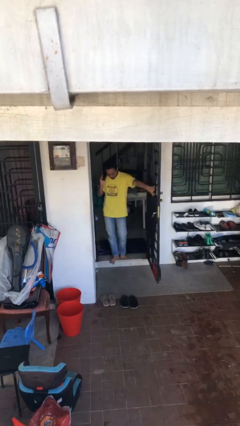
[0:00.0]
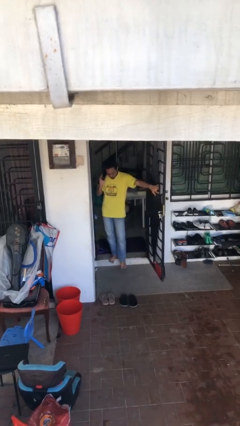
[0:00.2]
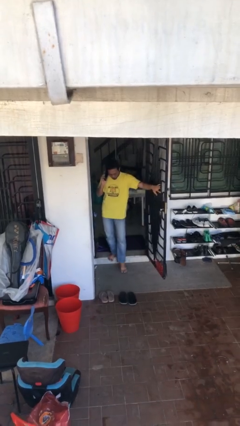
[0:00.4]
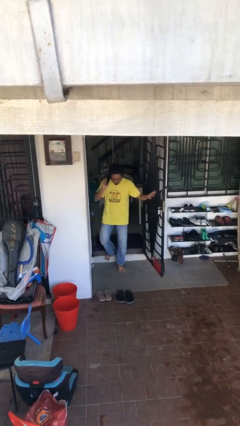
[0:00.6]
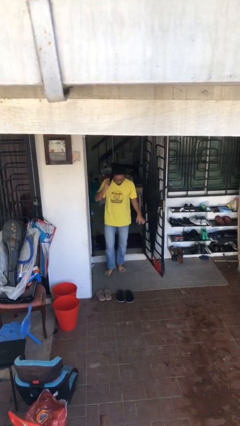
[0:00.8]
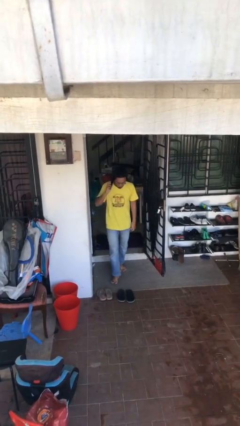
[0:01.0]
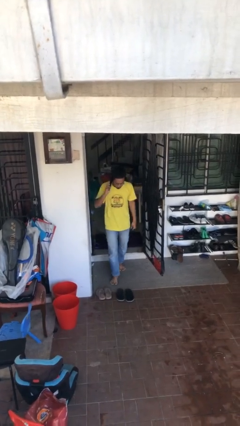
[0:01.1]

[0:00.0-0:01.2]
person enters scene through structure

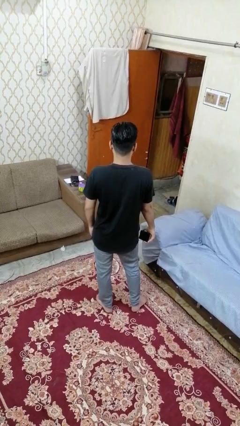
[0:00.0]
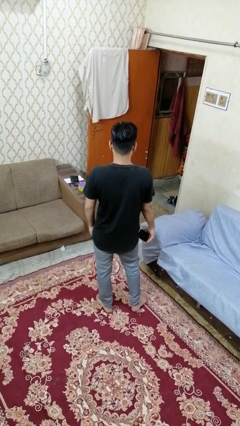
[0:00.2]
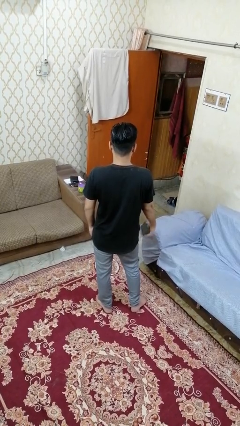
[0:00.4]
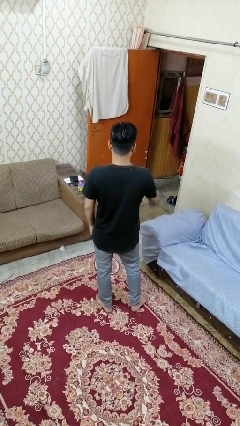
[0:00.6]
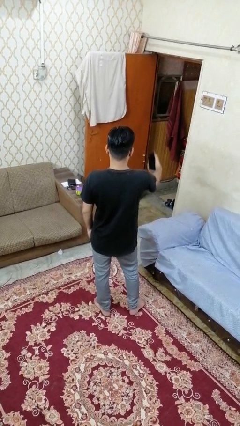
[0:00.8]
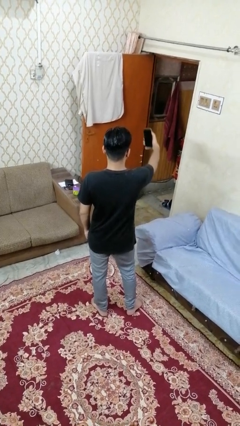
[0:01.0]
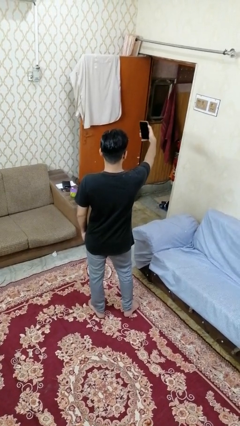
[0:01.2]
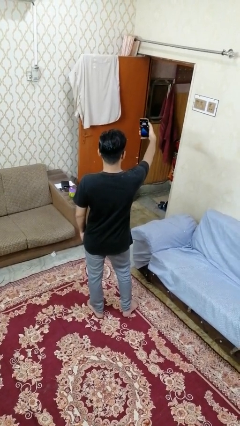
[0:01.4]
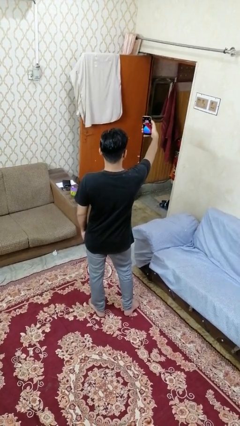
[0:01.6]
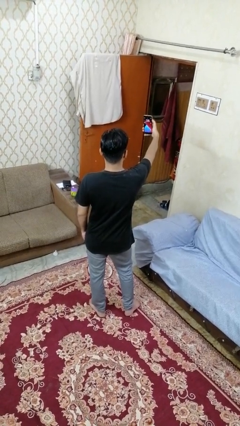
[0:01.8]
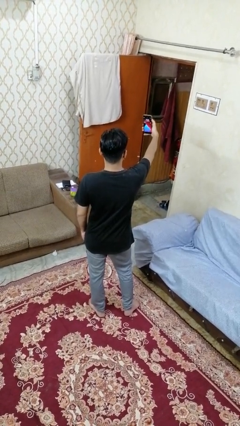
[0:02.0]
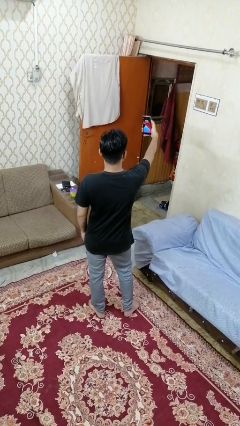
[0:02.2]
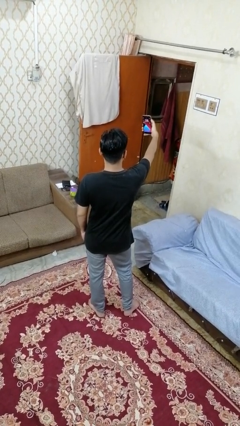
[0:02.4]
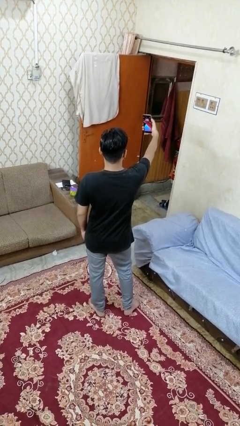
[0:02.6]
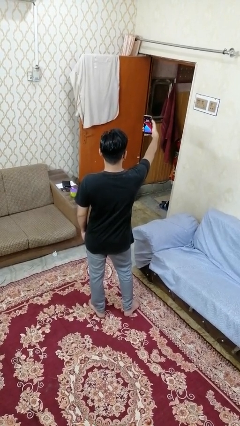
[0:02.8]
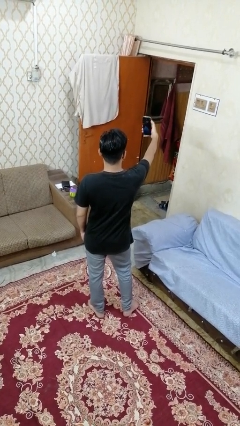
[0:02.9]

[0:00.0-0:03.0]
person takes selfie

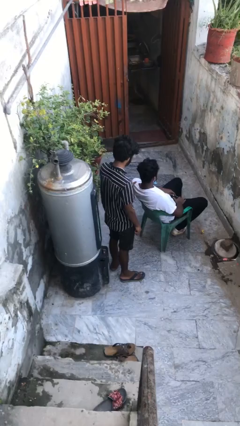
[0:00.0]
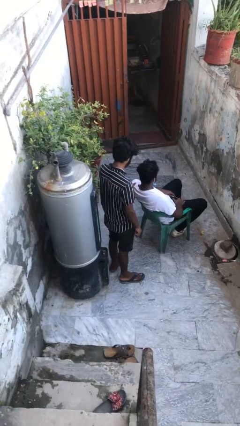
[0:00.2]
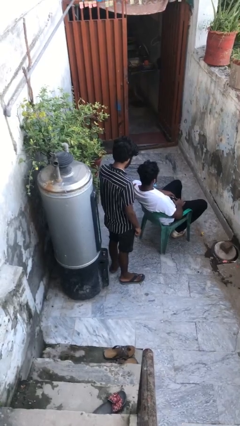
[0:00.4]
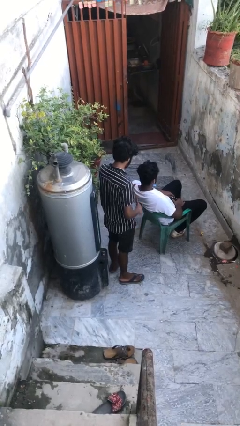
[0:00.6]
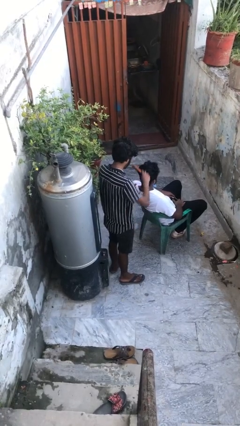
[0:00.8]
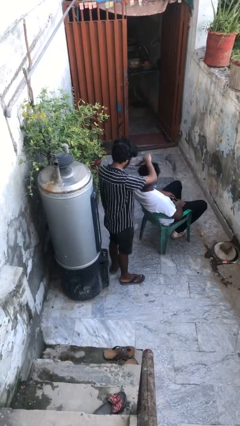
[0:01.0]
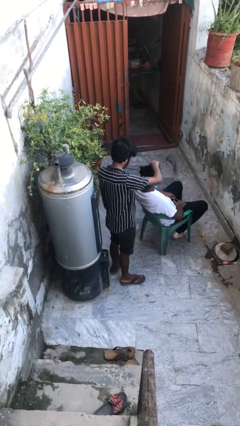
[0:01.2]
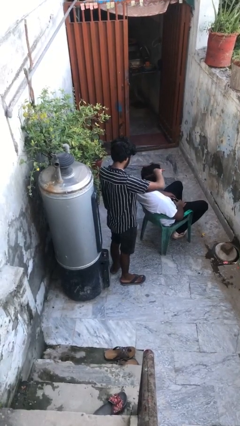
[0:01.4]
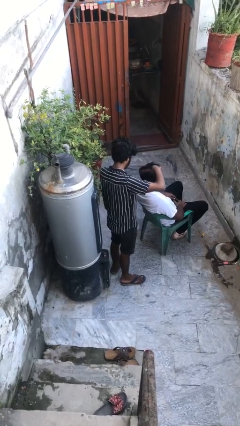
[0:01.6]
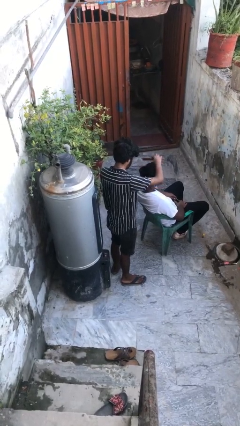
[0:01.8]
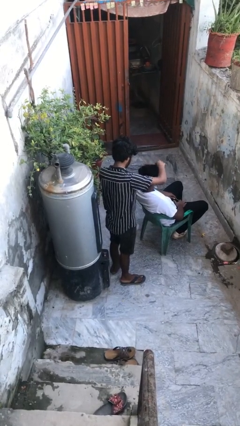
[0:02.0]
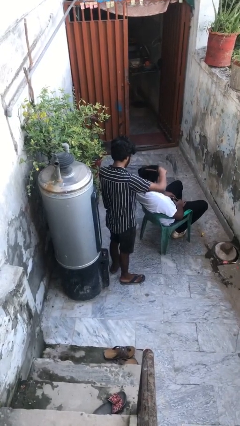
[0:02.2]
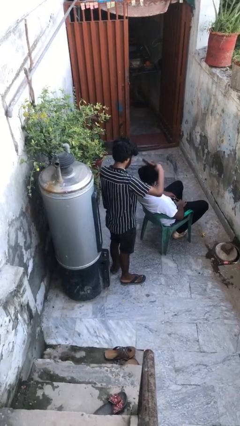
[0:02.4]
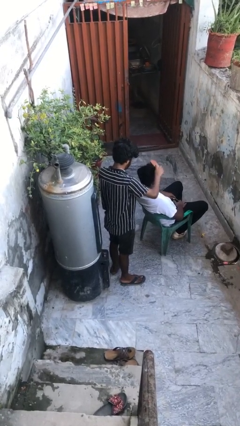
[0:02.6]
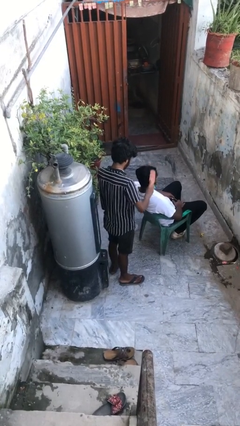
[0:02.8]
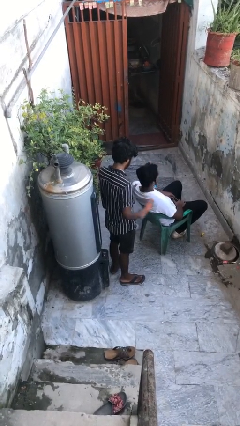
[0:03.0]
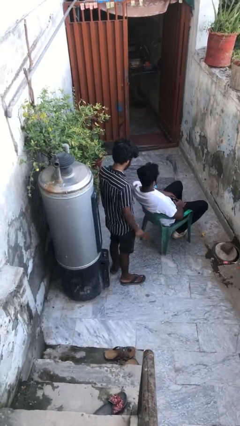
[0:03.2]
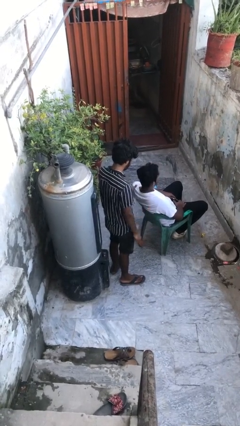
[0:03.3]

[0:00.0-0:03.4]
person brushes hair of person

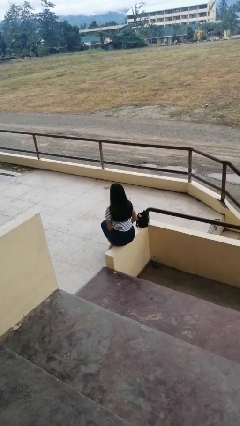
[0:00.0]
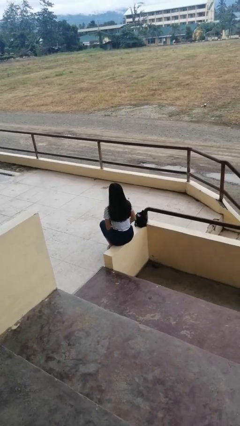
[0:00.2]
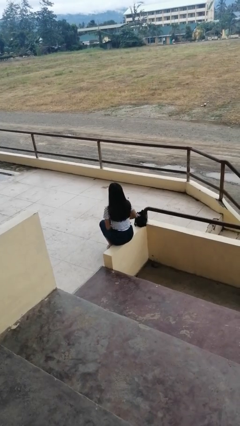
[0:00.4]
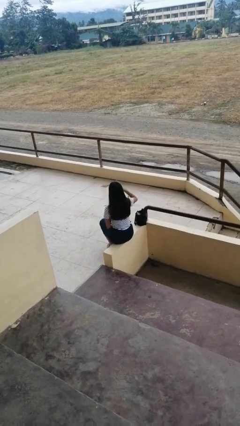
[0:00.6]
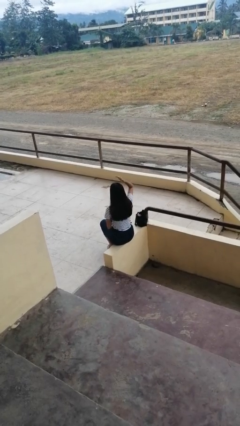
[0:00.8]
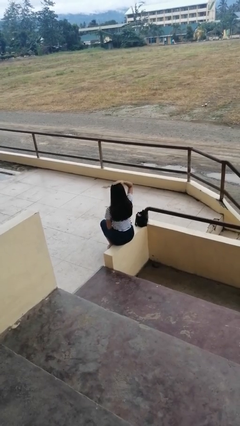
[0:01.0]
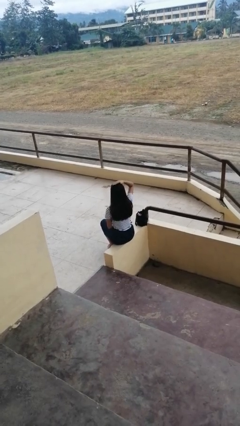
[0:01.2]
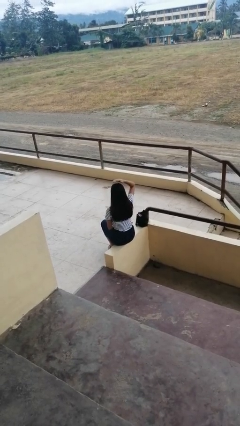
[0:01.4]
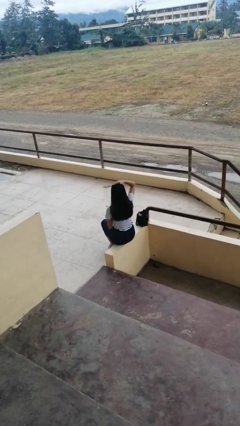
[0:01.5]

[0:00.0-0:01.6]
person pats head

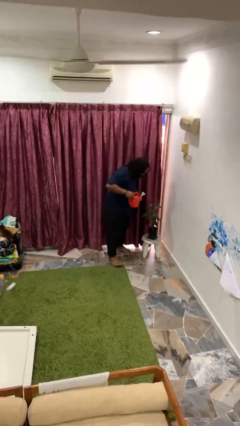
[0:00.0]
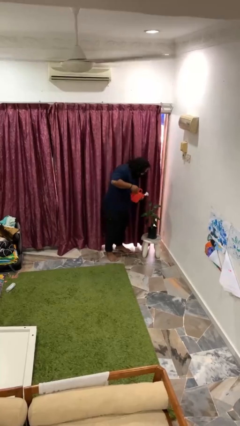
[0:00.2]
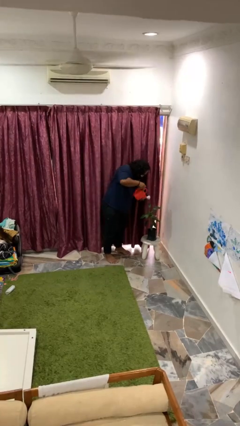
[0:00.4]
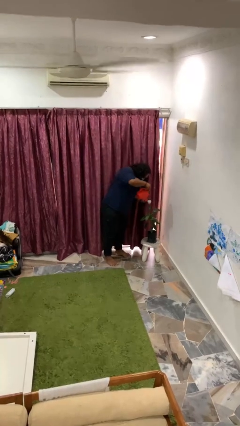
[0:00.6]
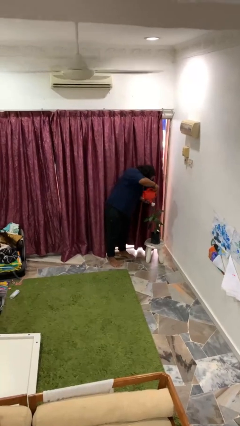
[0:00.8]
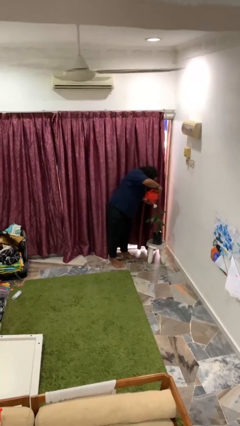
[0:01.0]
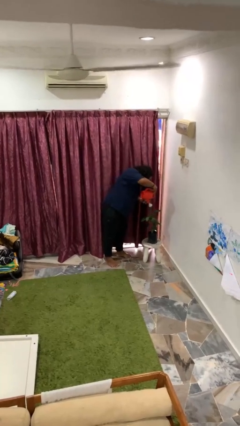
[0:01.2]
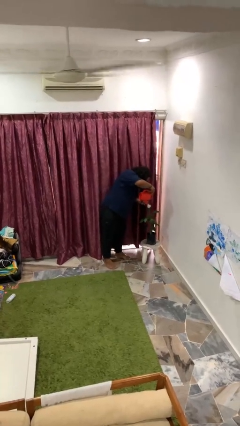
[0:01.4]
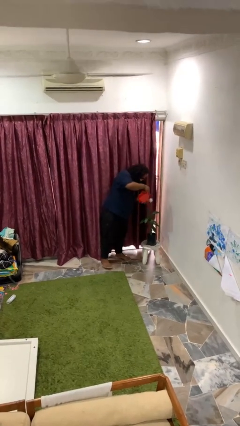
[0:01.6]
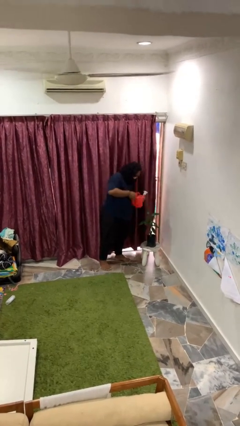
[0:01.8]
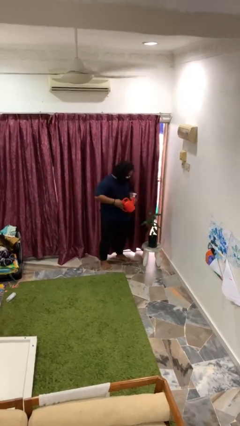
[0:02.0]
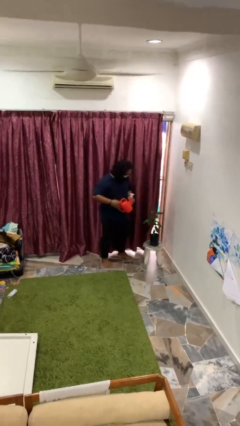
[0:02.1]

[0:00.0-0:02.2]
person waters houseplant

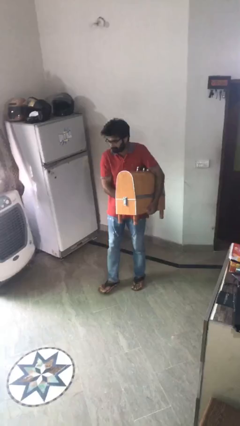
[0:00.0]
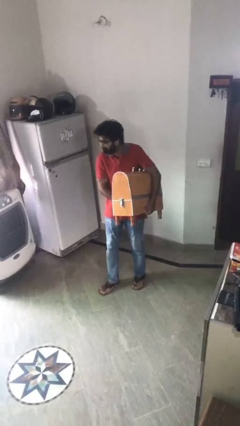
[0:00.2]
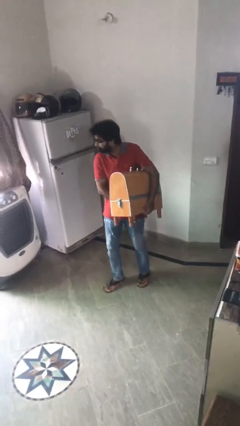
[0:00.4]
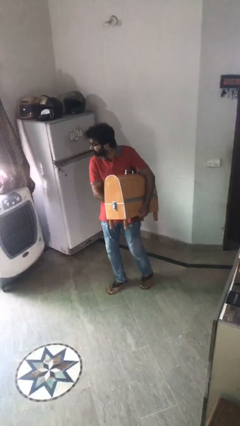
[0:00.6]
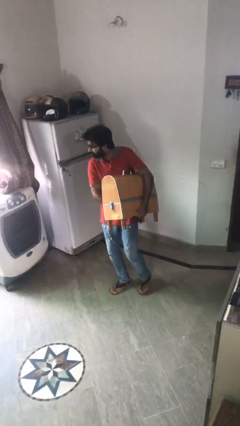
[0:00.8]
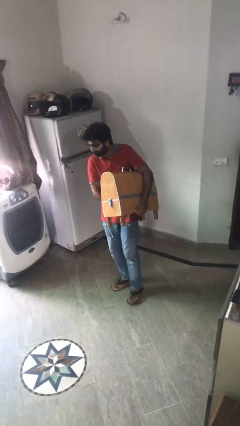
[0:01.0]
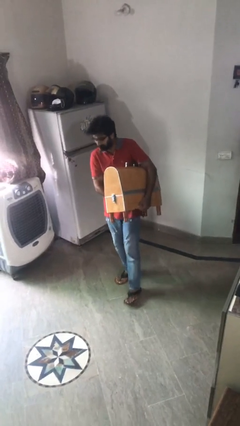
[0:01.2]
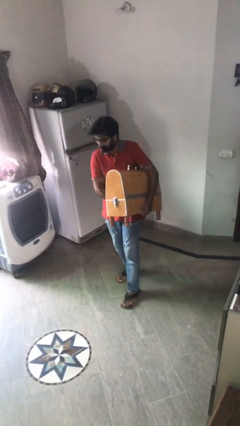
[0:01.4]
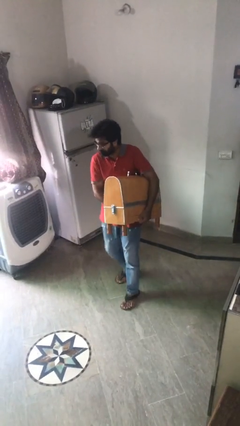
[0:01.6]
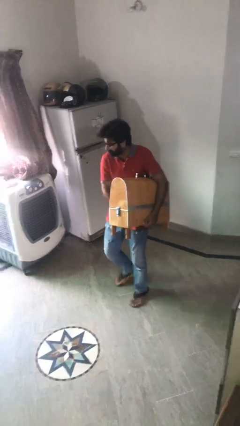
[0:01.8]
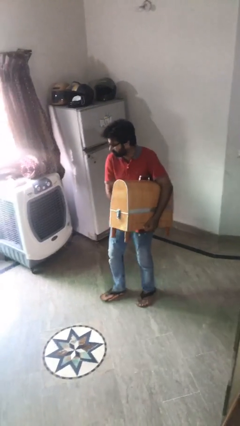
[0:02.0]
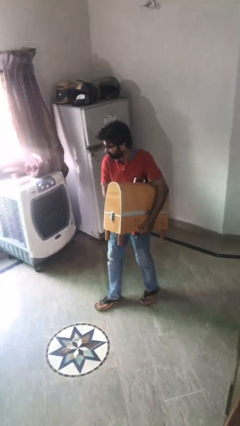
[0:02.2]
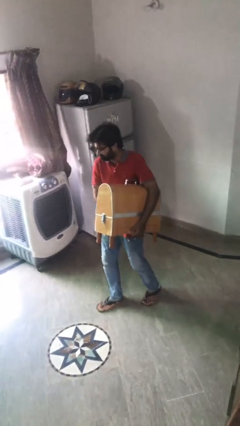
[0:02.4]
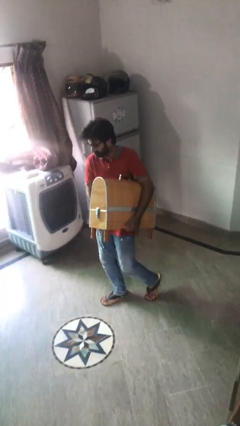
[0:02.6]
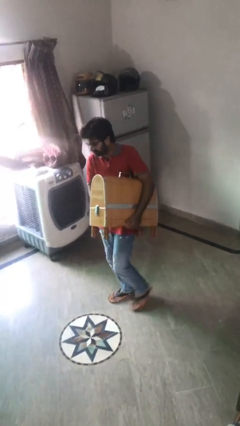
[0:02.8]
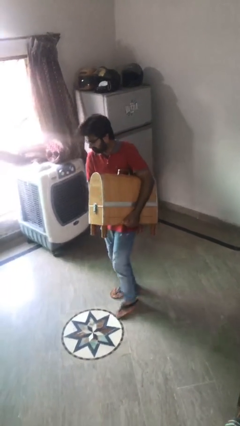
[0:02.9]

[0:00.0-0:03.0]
person carries heavy object

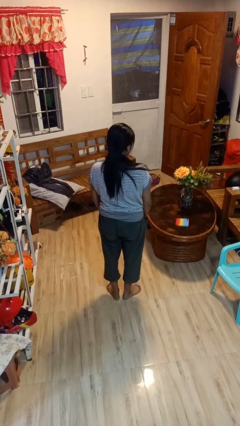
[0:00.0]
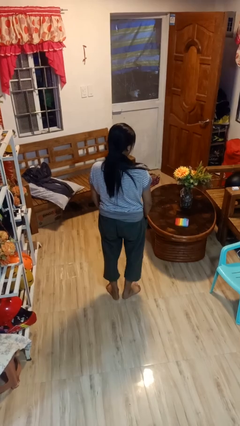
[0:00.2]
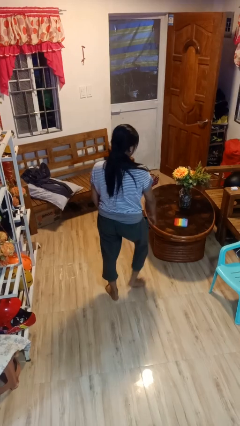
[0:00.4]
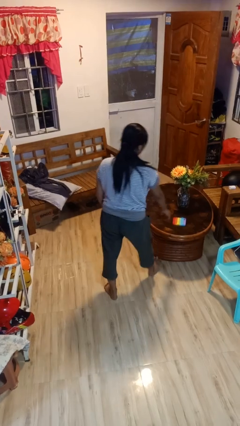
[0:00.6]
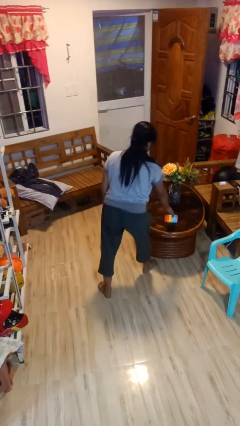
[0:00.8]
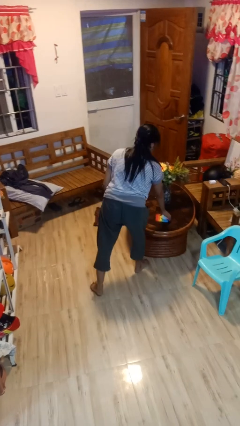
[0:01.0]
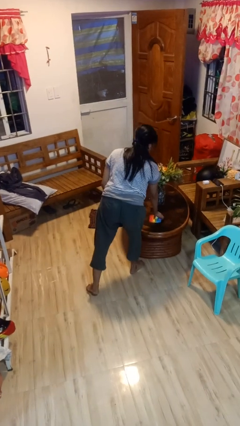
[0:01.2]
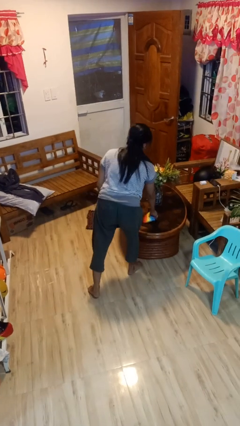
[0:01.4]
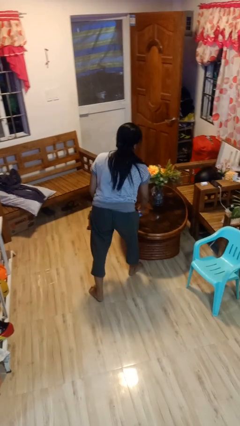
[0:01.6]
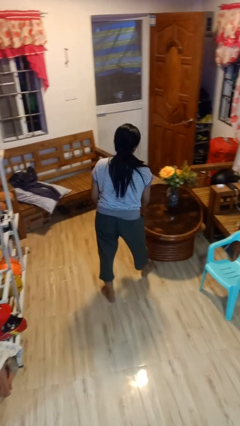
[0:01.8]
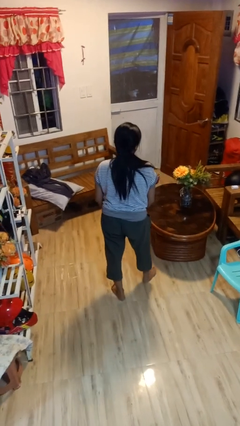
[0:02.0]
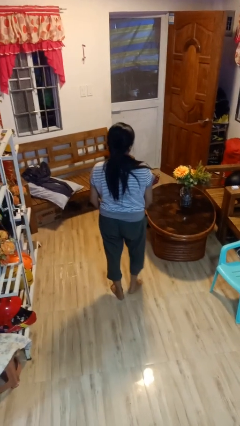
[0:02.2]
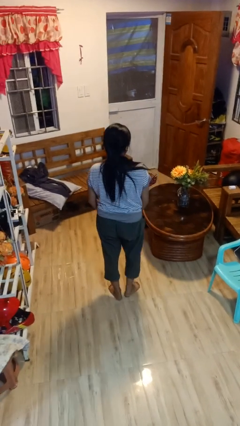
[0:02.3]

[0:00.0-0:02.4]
person picks up object from table
